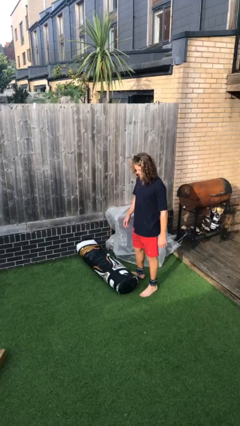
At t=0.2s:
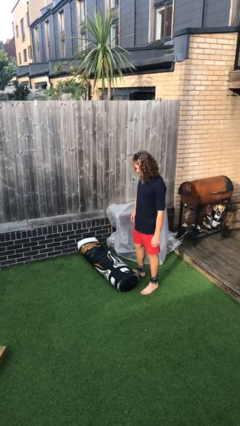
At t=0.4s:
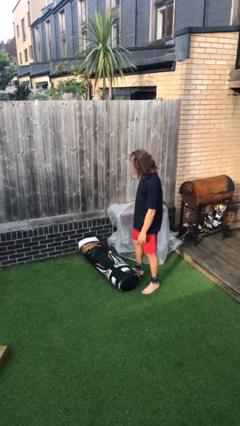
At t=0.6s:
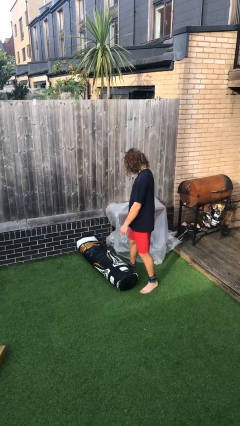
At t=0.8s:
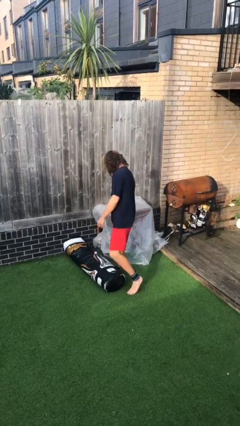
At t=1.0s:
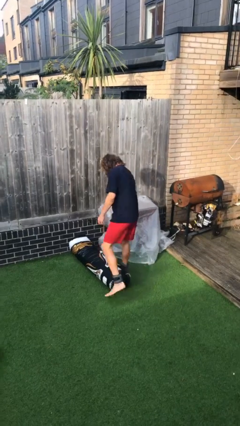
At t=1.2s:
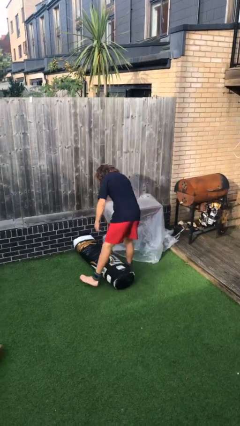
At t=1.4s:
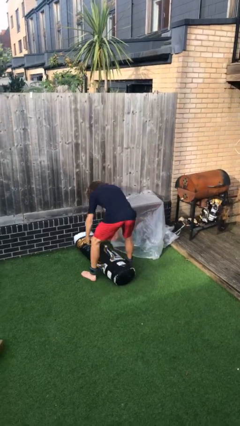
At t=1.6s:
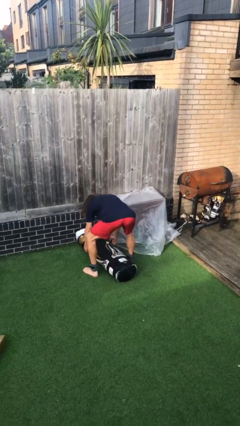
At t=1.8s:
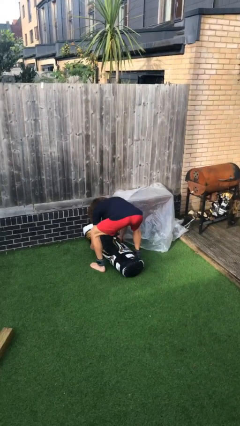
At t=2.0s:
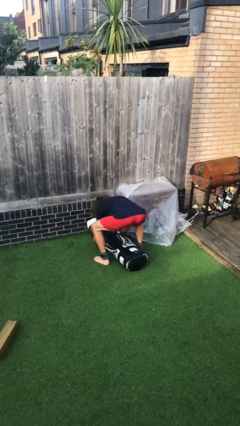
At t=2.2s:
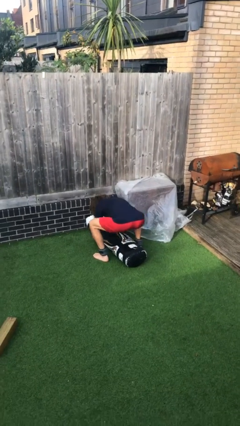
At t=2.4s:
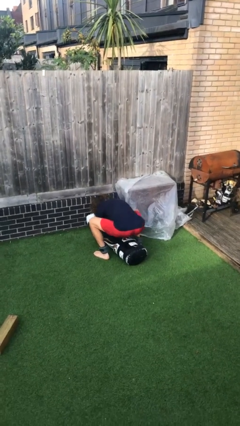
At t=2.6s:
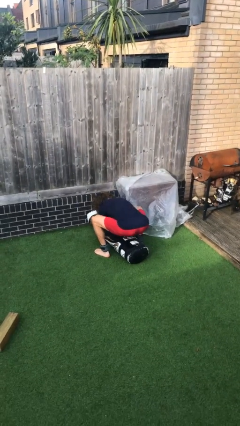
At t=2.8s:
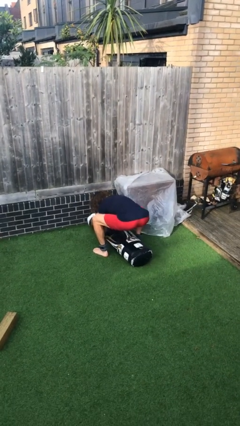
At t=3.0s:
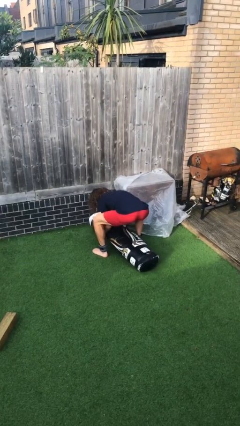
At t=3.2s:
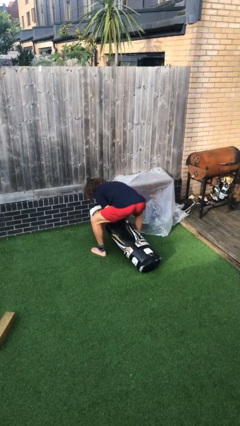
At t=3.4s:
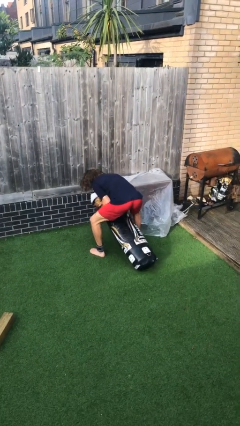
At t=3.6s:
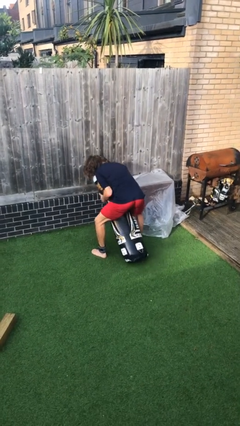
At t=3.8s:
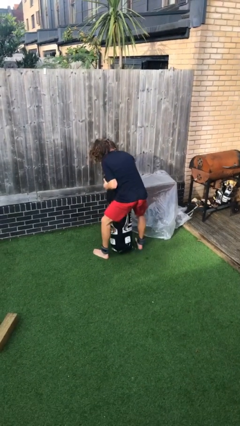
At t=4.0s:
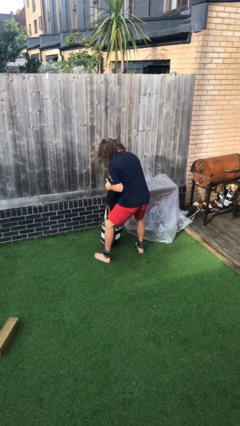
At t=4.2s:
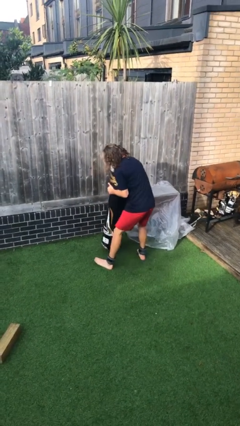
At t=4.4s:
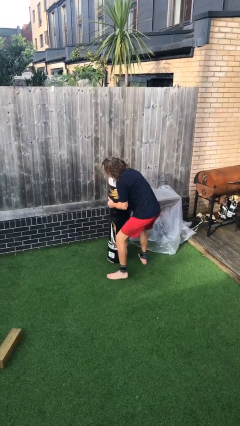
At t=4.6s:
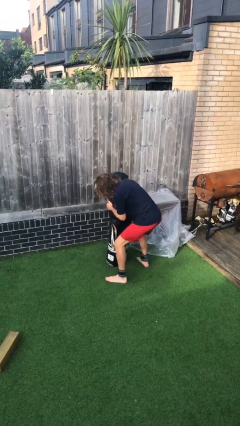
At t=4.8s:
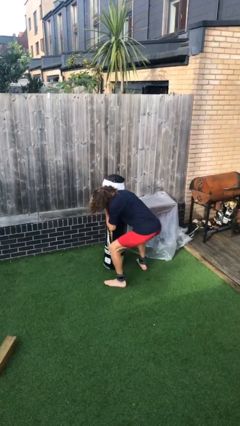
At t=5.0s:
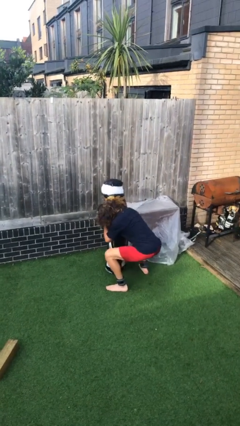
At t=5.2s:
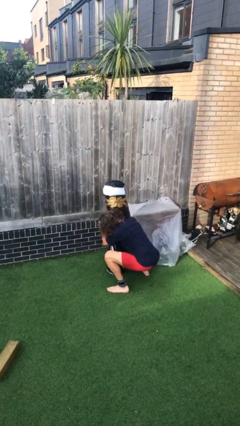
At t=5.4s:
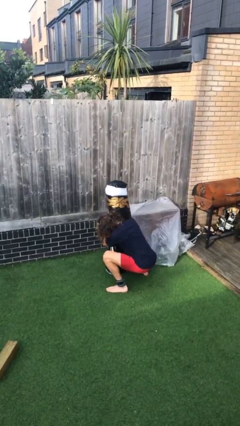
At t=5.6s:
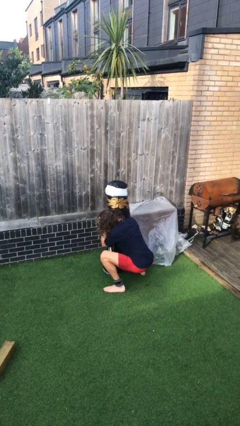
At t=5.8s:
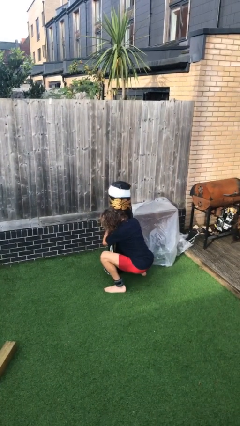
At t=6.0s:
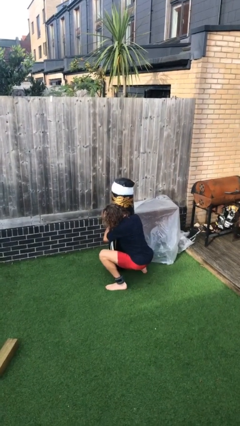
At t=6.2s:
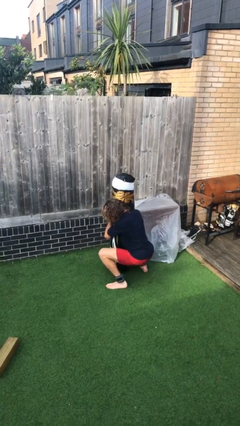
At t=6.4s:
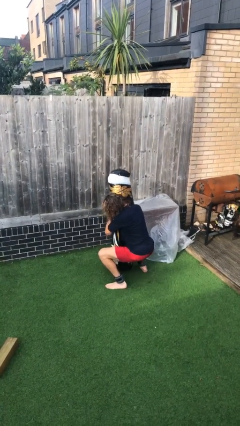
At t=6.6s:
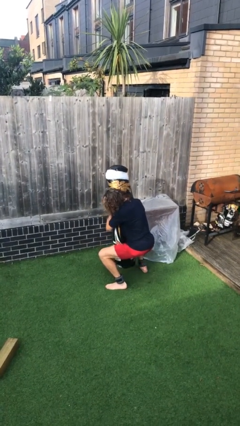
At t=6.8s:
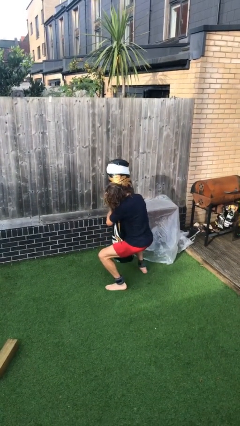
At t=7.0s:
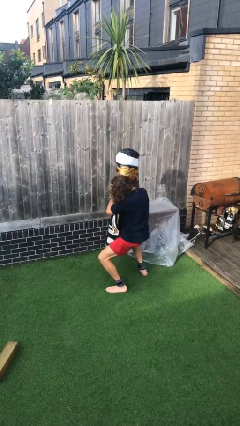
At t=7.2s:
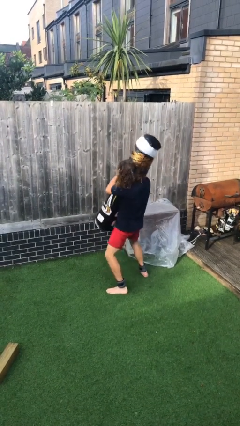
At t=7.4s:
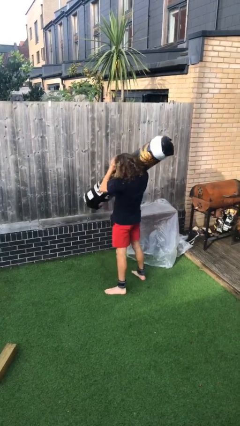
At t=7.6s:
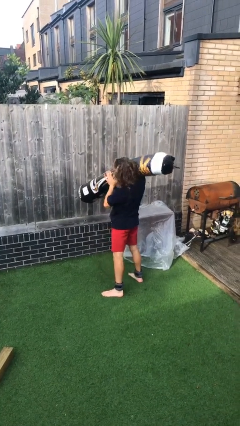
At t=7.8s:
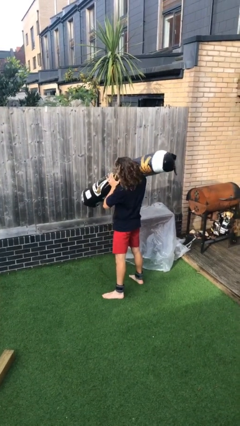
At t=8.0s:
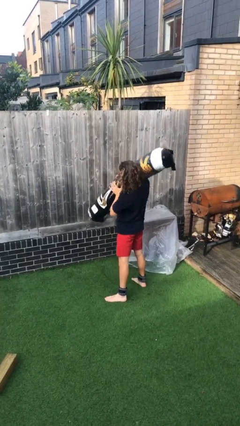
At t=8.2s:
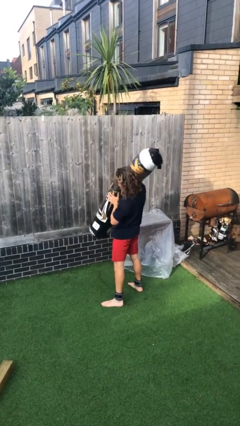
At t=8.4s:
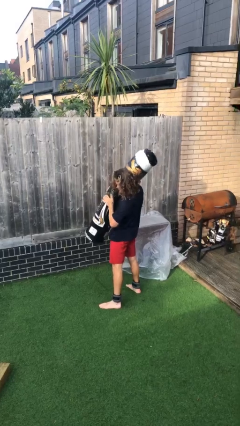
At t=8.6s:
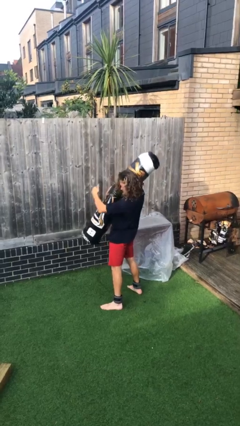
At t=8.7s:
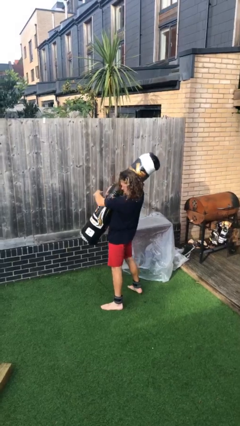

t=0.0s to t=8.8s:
person picks up object from floor

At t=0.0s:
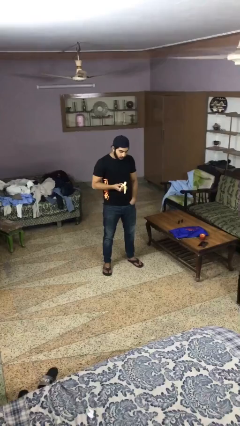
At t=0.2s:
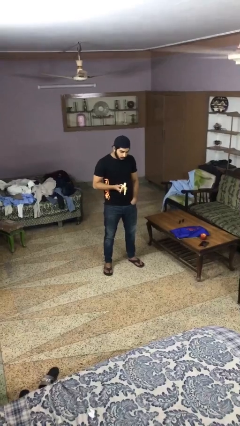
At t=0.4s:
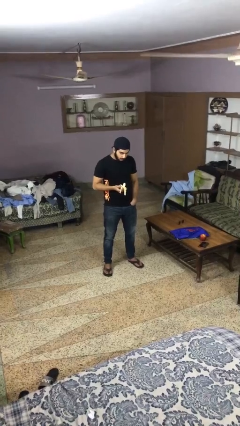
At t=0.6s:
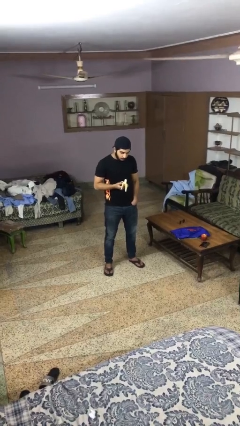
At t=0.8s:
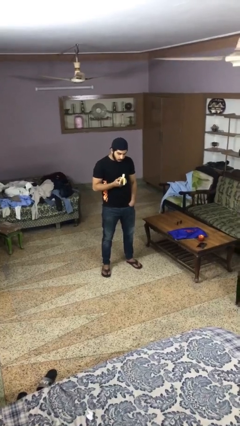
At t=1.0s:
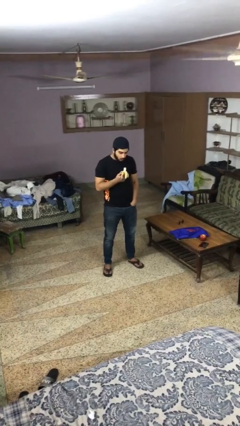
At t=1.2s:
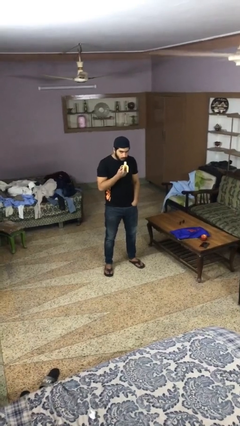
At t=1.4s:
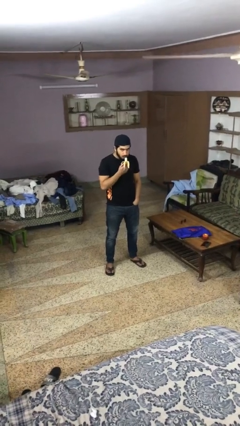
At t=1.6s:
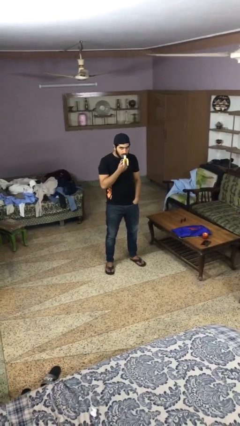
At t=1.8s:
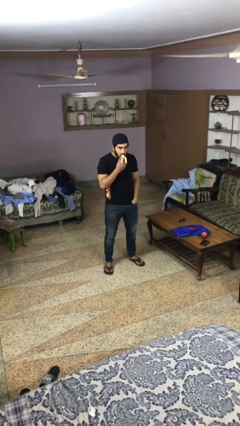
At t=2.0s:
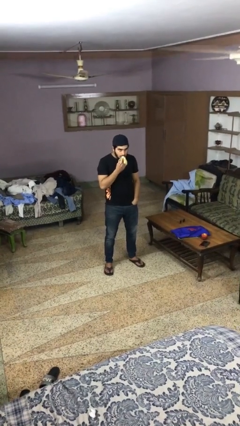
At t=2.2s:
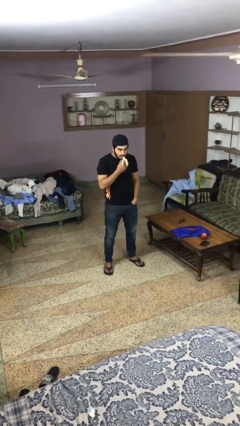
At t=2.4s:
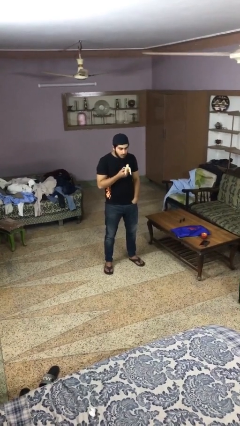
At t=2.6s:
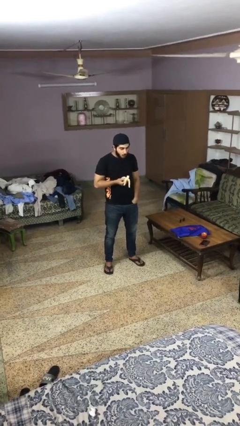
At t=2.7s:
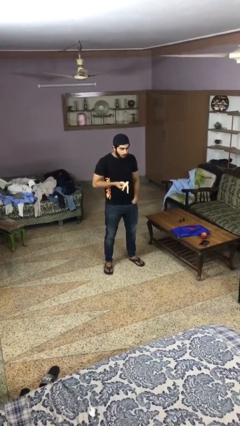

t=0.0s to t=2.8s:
person eats banana

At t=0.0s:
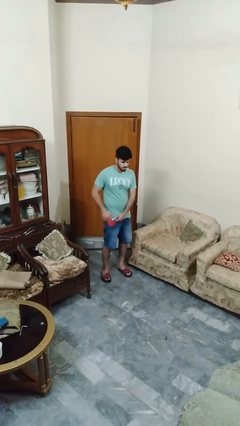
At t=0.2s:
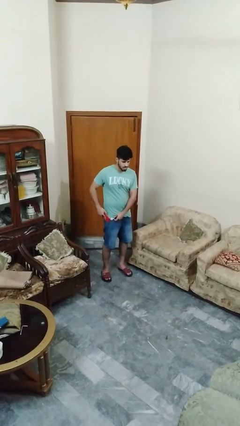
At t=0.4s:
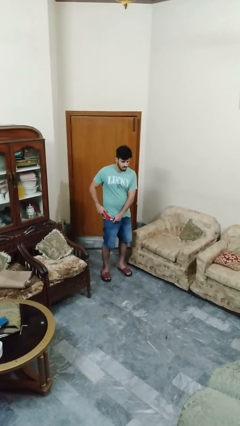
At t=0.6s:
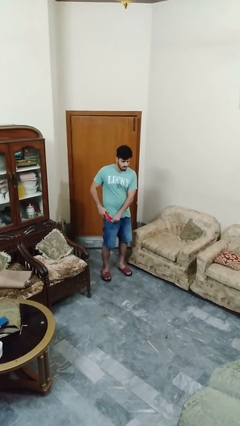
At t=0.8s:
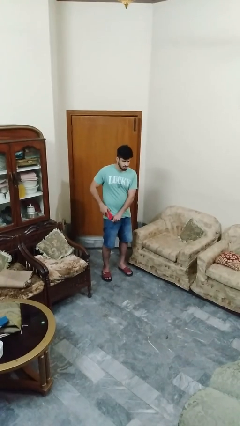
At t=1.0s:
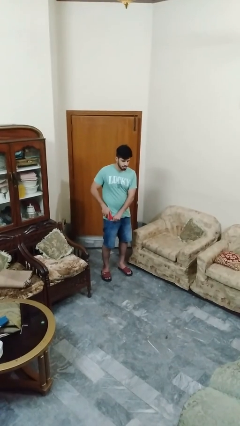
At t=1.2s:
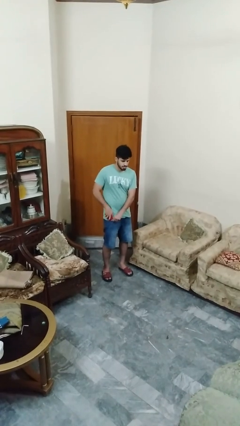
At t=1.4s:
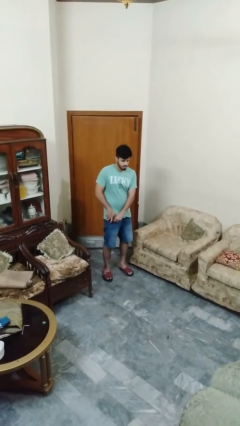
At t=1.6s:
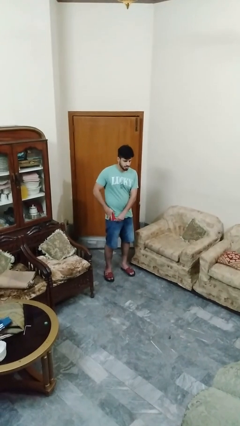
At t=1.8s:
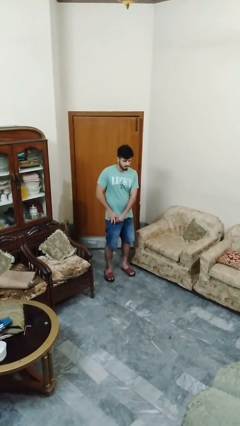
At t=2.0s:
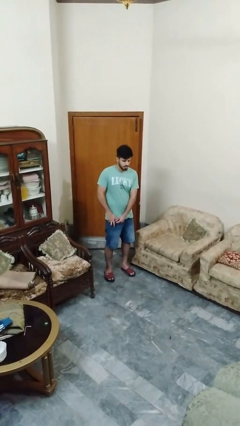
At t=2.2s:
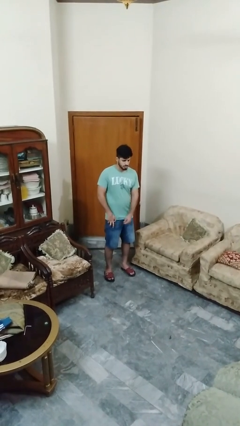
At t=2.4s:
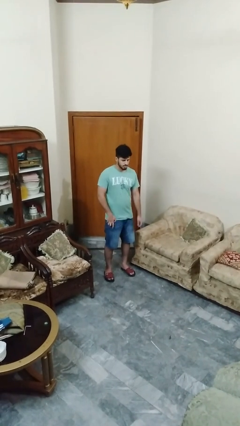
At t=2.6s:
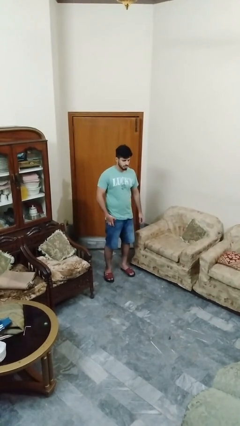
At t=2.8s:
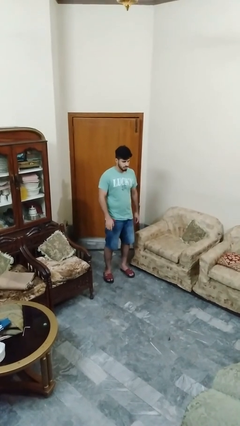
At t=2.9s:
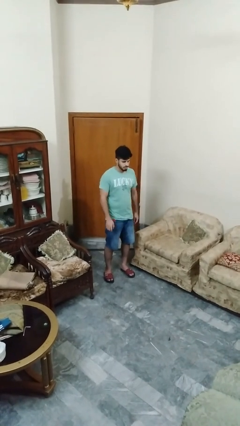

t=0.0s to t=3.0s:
person puts phone into pocket

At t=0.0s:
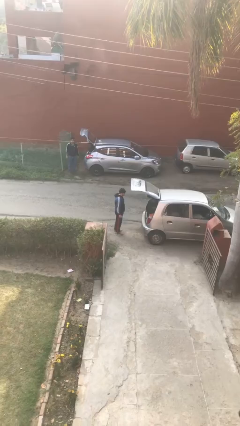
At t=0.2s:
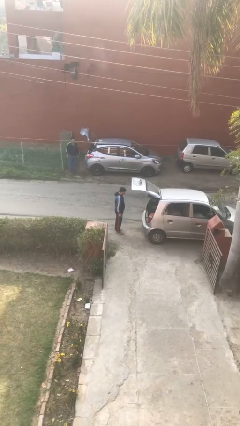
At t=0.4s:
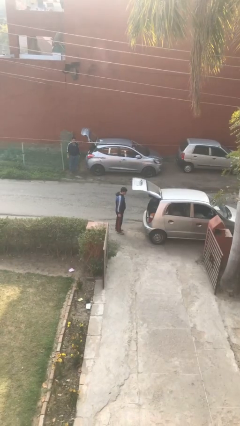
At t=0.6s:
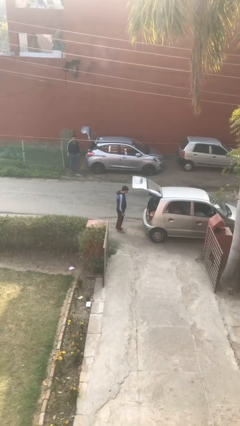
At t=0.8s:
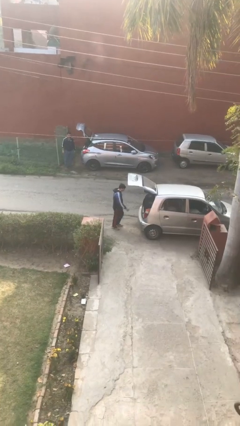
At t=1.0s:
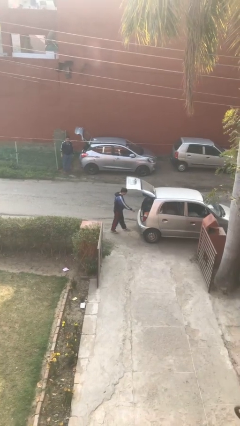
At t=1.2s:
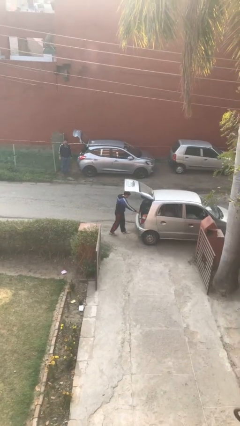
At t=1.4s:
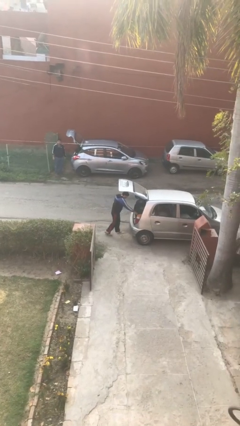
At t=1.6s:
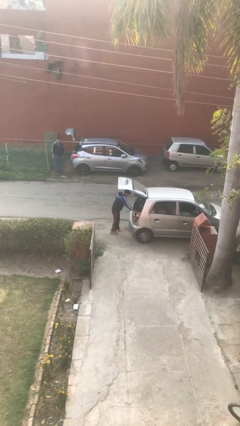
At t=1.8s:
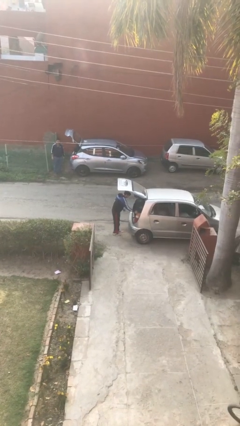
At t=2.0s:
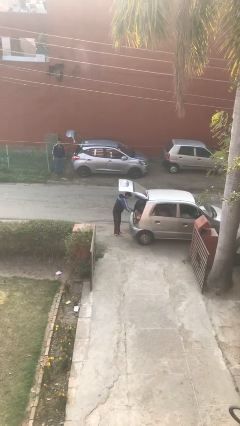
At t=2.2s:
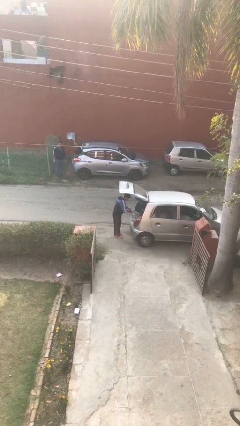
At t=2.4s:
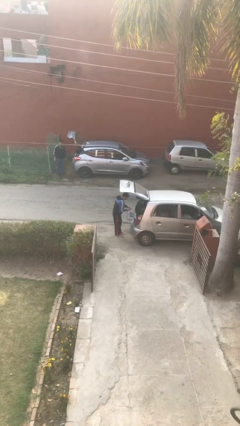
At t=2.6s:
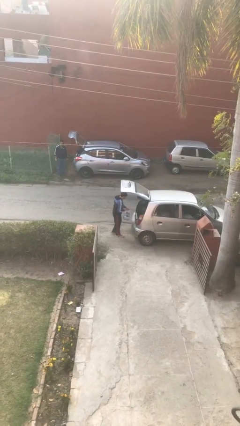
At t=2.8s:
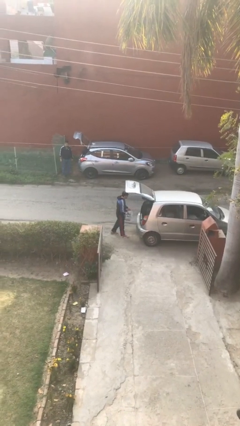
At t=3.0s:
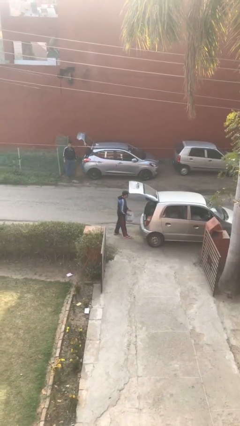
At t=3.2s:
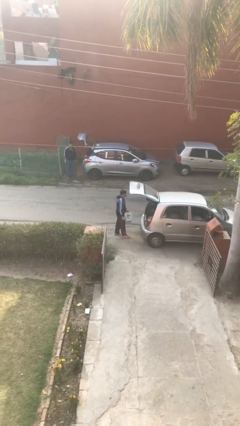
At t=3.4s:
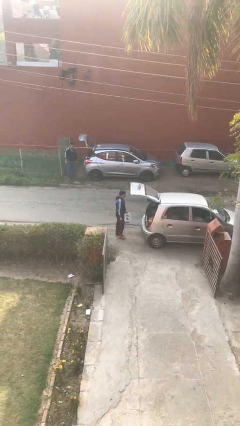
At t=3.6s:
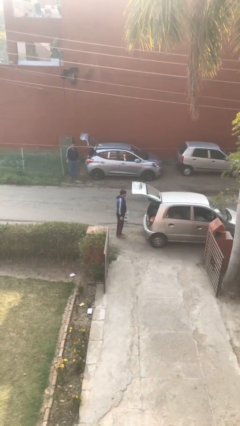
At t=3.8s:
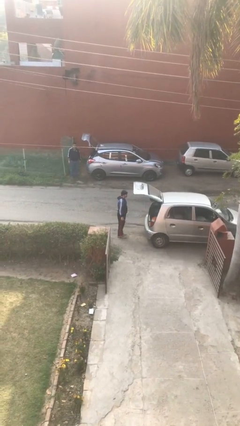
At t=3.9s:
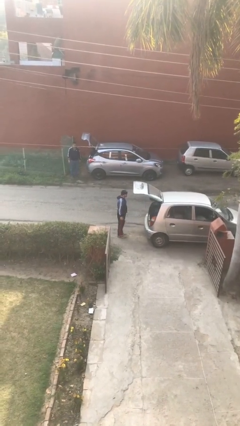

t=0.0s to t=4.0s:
person unloads car
